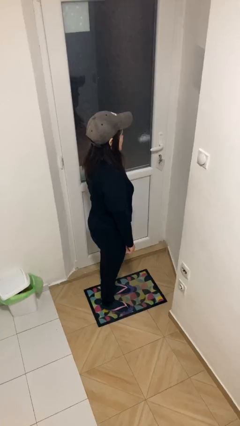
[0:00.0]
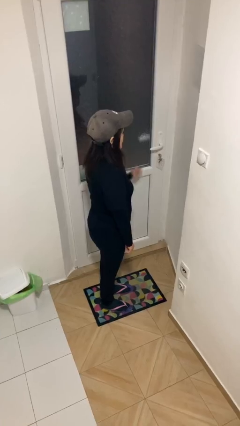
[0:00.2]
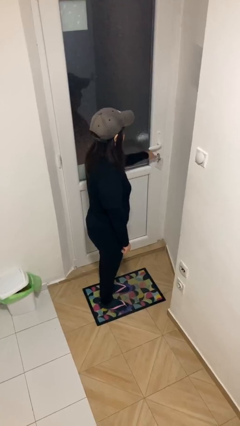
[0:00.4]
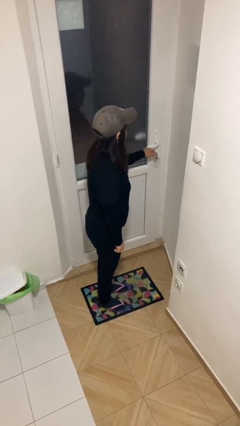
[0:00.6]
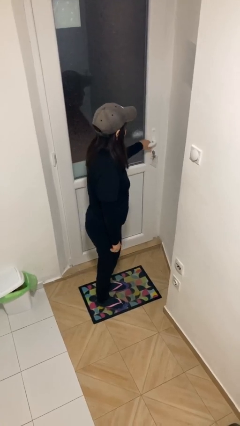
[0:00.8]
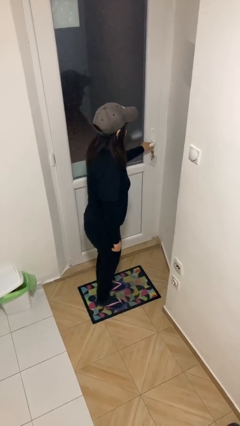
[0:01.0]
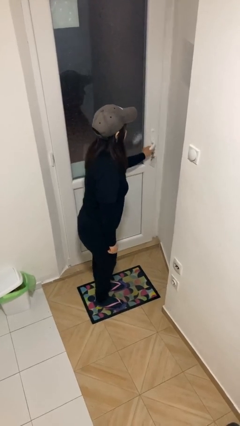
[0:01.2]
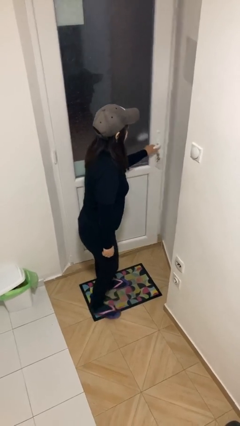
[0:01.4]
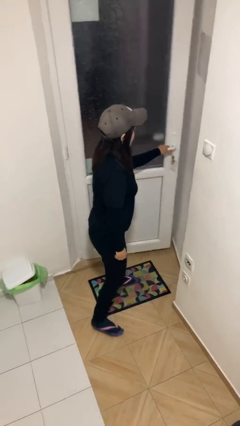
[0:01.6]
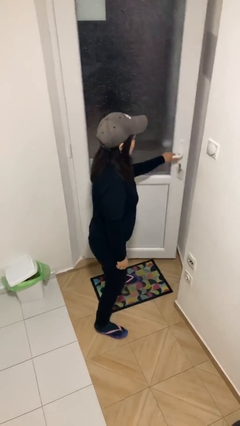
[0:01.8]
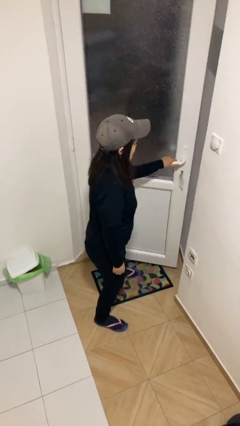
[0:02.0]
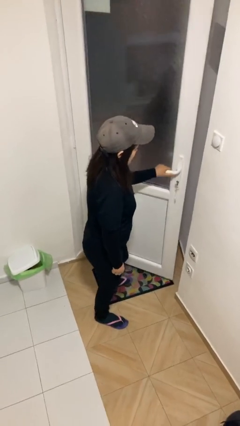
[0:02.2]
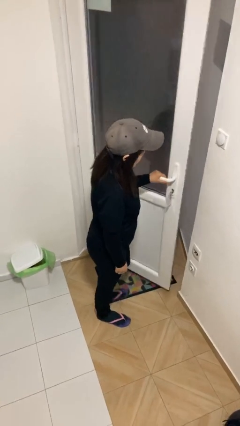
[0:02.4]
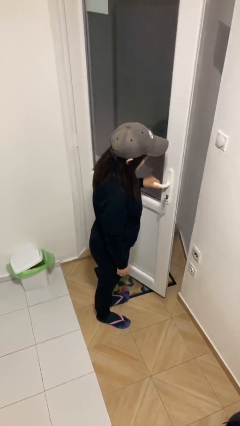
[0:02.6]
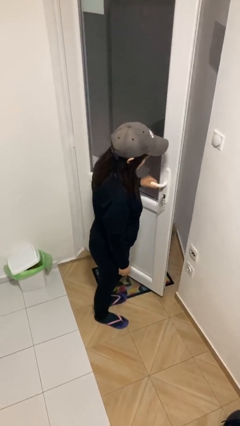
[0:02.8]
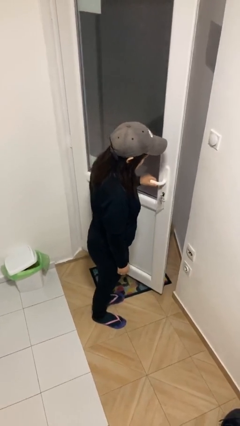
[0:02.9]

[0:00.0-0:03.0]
person opens facility door

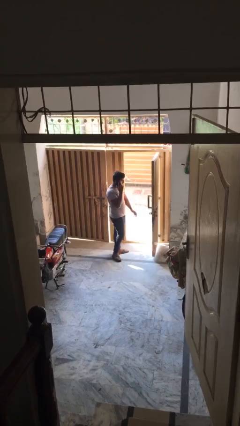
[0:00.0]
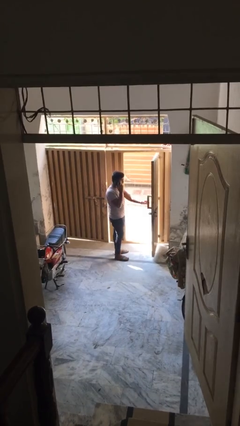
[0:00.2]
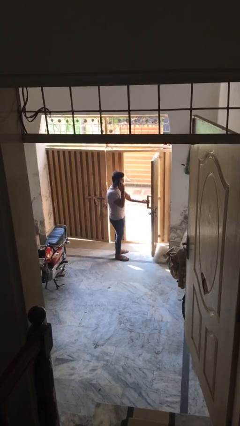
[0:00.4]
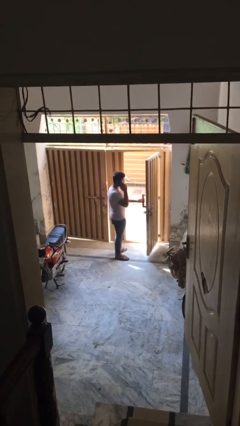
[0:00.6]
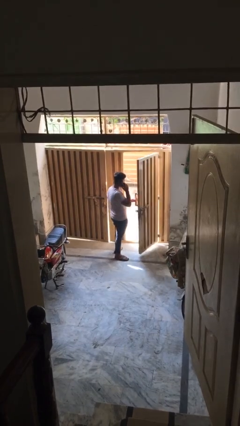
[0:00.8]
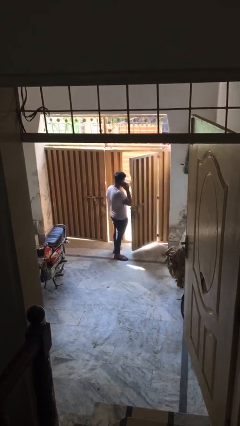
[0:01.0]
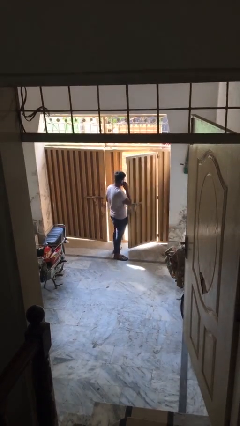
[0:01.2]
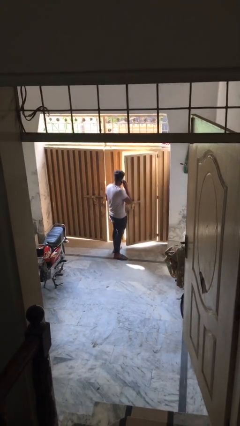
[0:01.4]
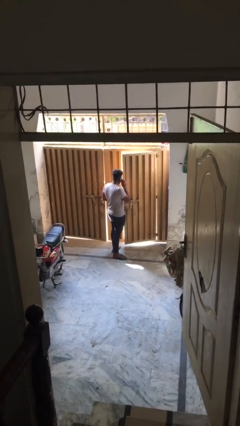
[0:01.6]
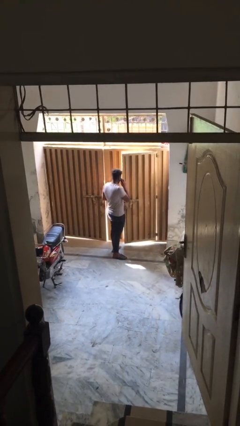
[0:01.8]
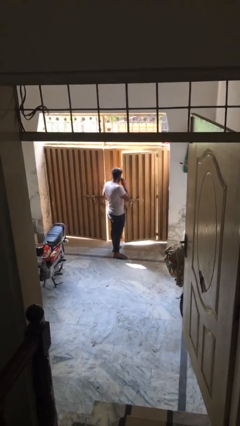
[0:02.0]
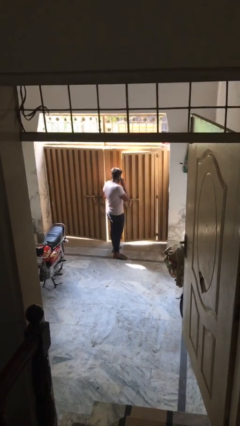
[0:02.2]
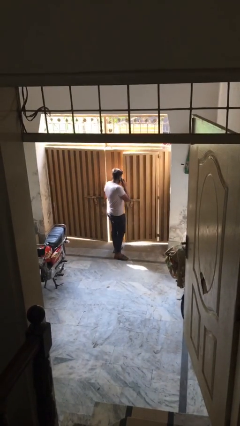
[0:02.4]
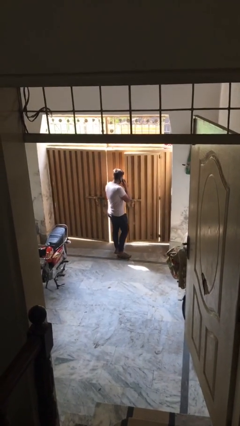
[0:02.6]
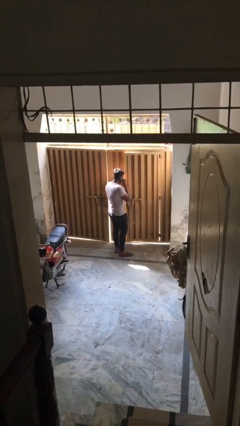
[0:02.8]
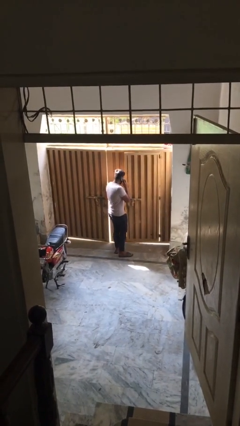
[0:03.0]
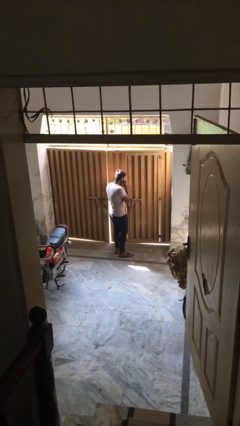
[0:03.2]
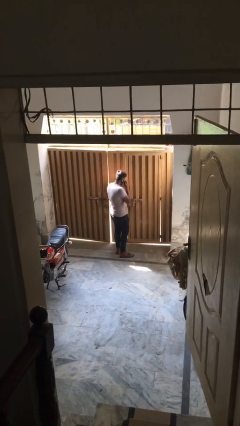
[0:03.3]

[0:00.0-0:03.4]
person closes facility door

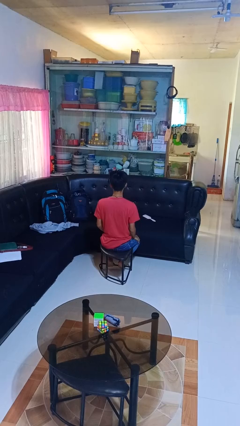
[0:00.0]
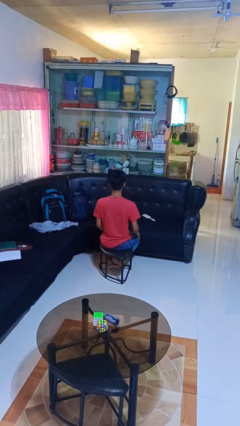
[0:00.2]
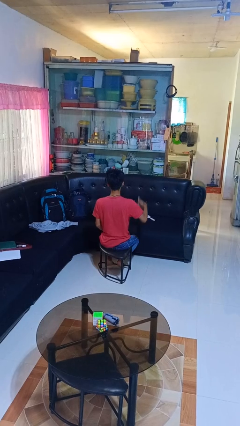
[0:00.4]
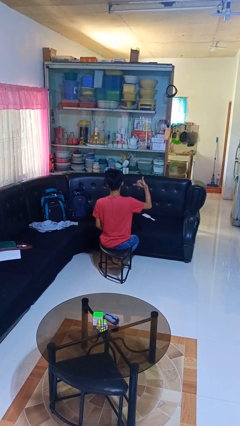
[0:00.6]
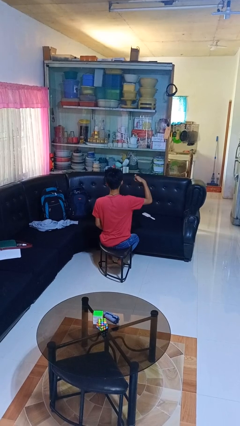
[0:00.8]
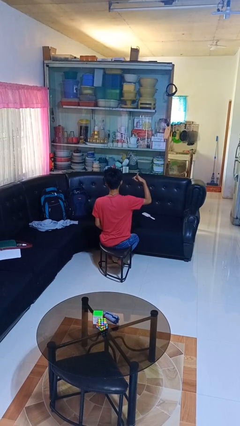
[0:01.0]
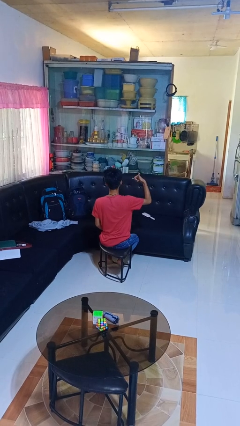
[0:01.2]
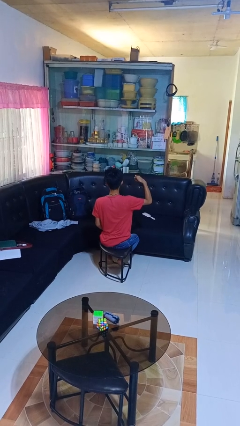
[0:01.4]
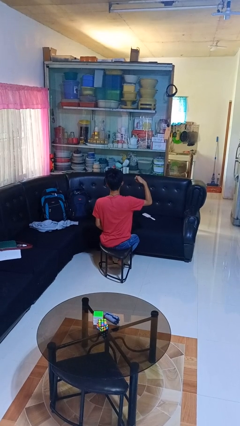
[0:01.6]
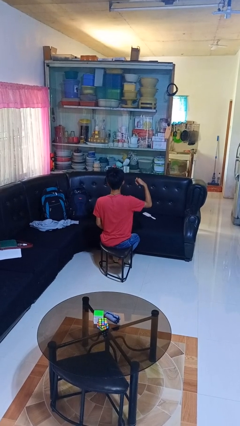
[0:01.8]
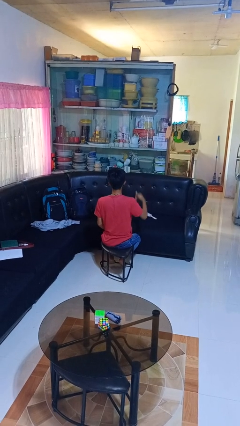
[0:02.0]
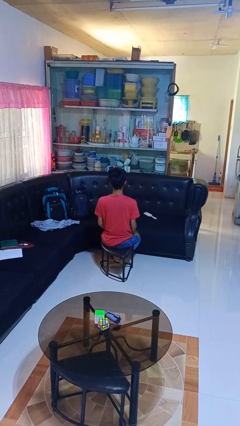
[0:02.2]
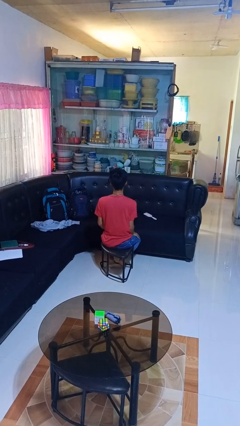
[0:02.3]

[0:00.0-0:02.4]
person gestures hang loose

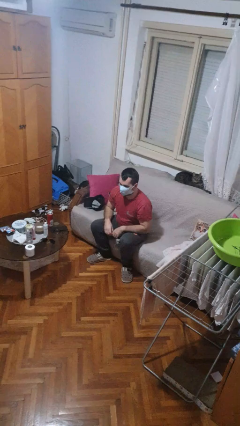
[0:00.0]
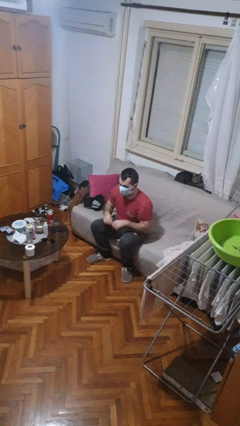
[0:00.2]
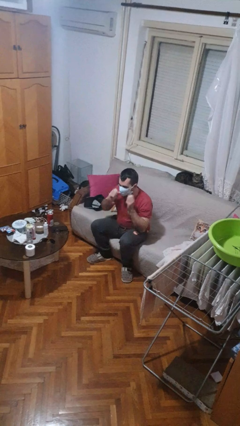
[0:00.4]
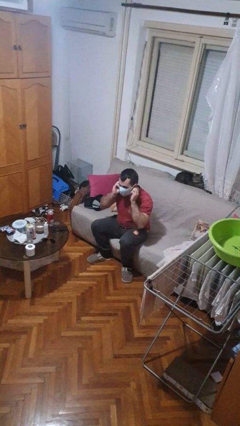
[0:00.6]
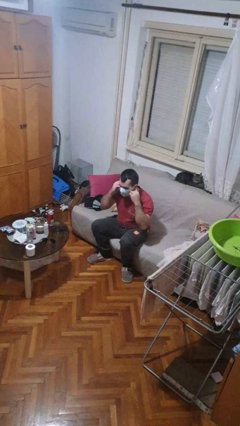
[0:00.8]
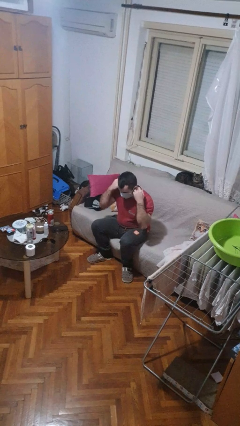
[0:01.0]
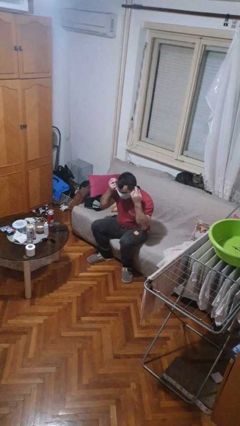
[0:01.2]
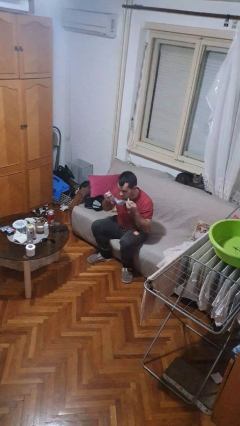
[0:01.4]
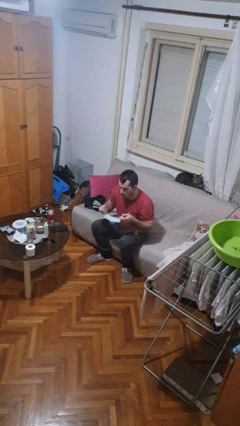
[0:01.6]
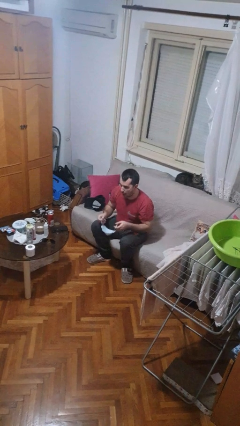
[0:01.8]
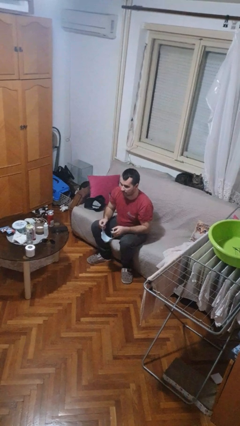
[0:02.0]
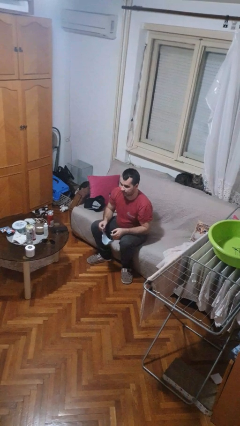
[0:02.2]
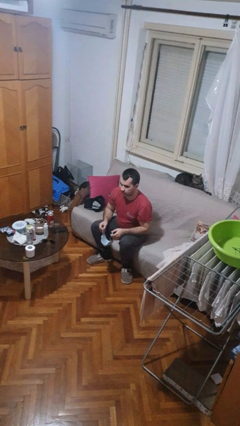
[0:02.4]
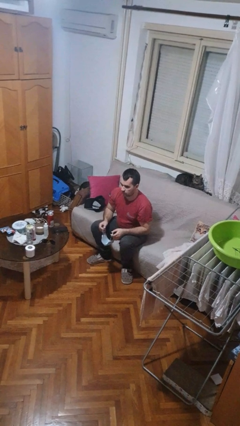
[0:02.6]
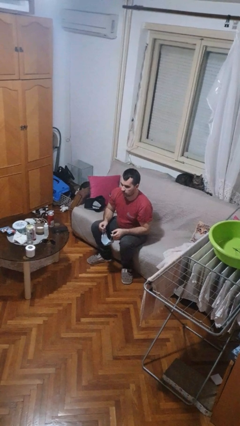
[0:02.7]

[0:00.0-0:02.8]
person takes off facemask

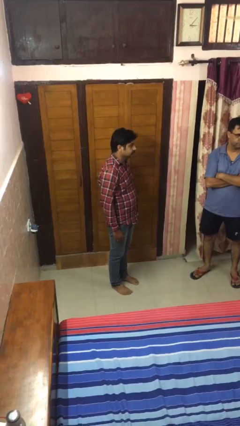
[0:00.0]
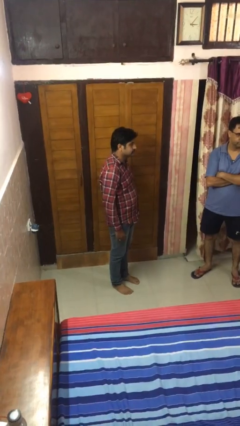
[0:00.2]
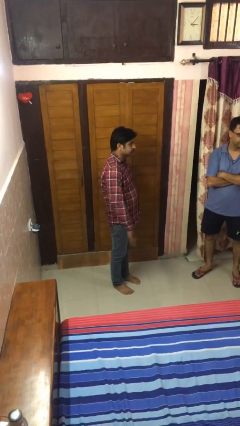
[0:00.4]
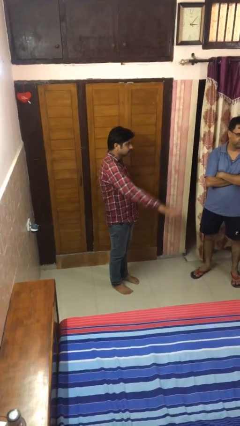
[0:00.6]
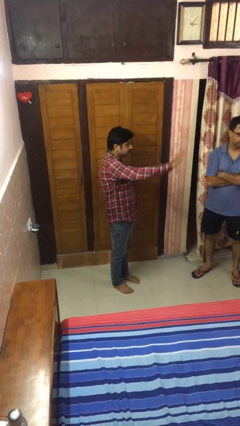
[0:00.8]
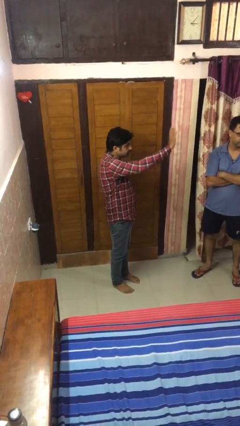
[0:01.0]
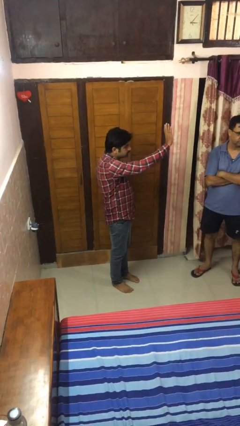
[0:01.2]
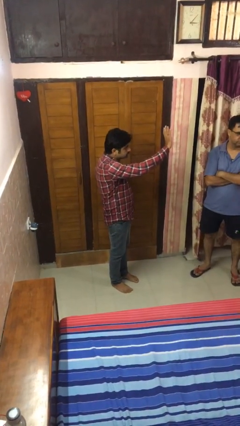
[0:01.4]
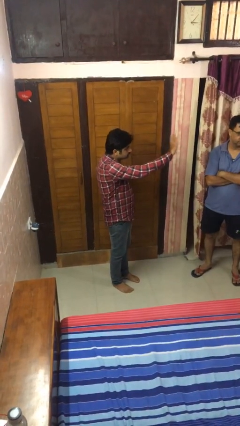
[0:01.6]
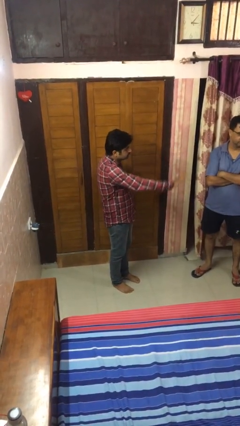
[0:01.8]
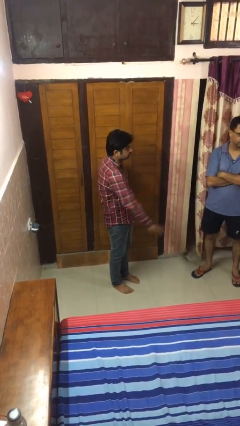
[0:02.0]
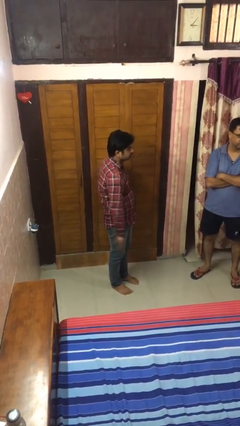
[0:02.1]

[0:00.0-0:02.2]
person waves at person

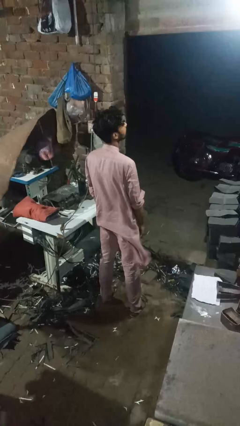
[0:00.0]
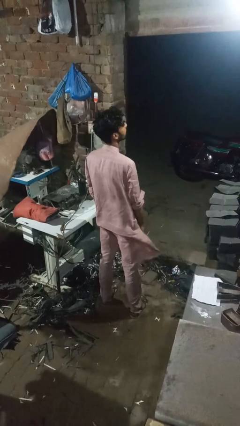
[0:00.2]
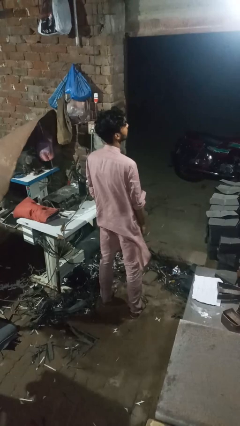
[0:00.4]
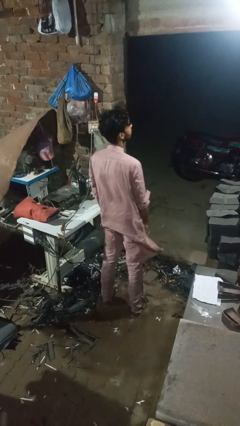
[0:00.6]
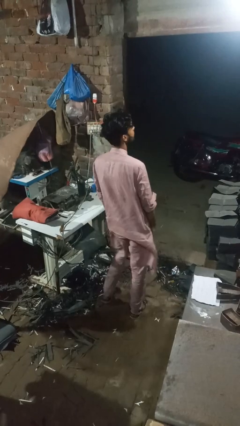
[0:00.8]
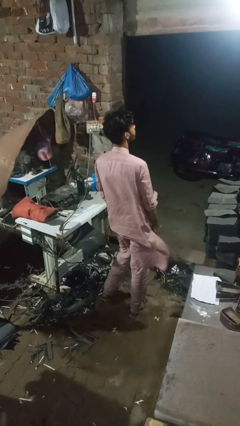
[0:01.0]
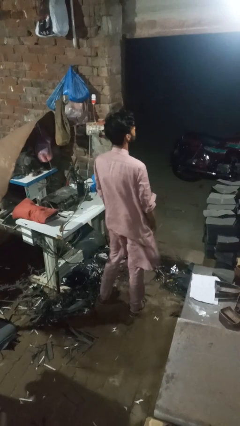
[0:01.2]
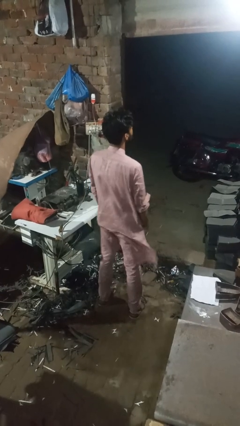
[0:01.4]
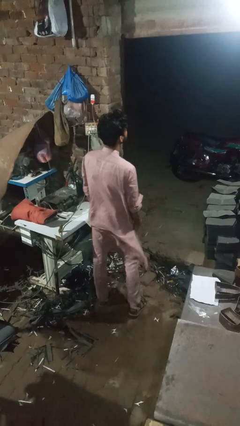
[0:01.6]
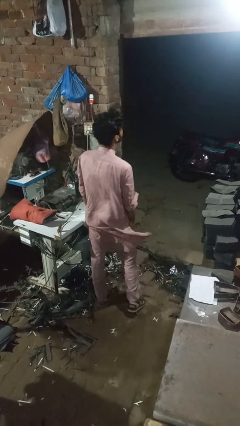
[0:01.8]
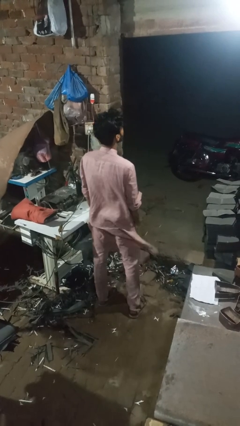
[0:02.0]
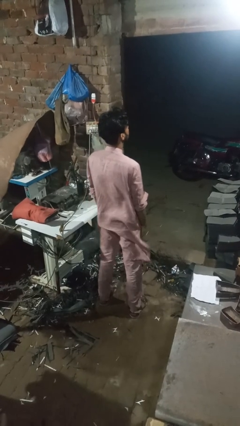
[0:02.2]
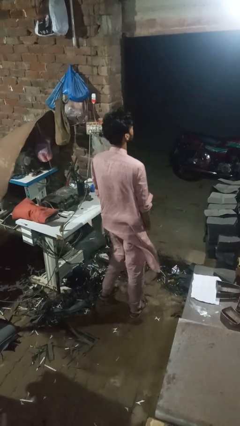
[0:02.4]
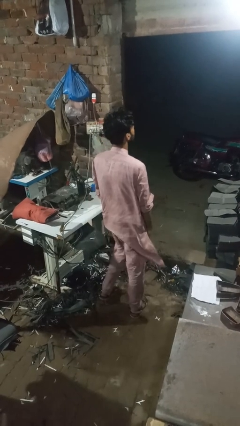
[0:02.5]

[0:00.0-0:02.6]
person wiggles hips

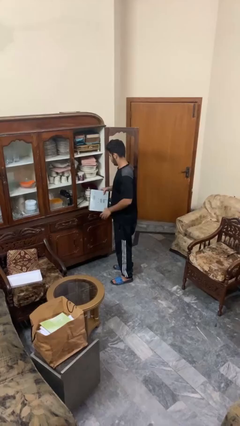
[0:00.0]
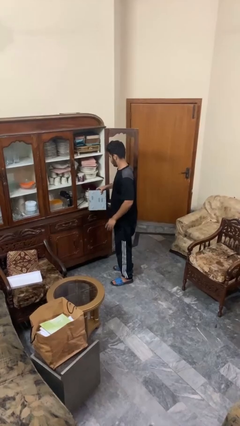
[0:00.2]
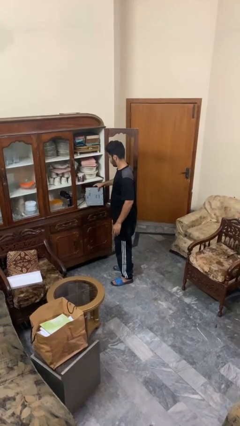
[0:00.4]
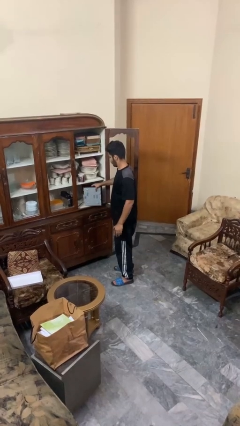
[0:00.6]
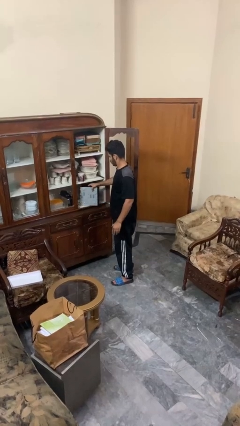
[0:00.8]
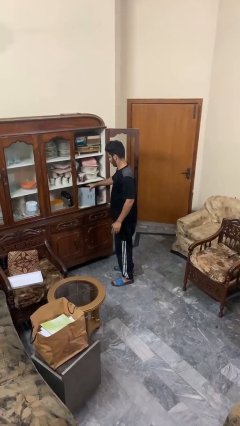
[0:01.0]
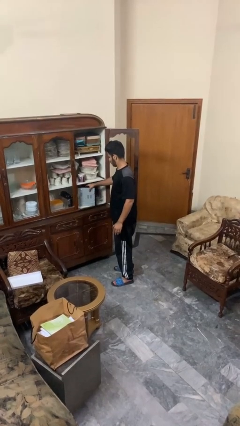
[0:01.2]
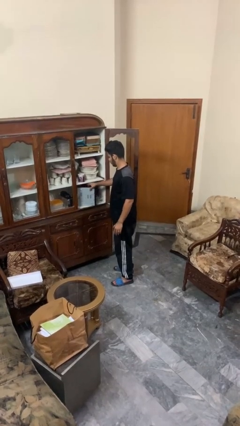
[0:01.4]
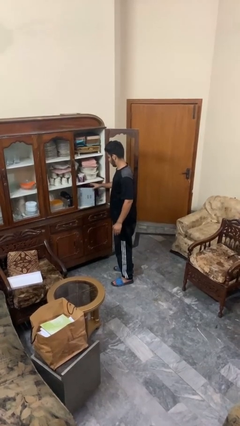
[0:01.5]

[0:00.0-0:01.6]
person puts down object into cabinet
